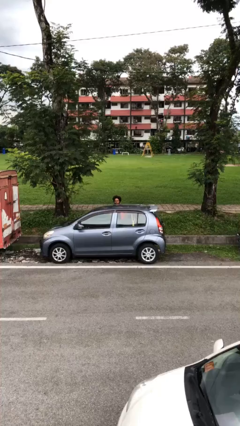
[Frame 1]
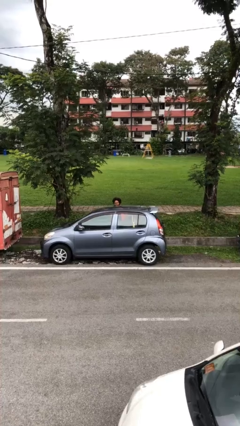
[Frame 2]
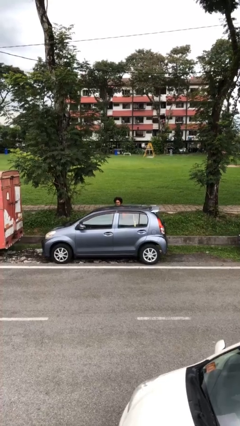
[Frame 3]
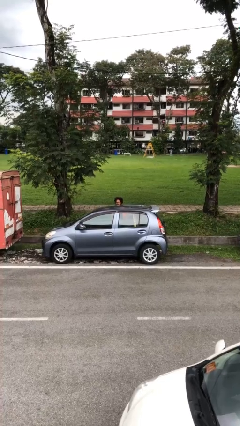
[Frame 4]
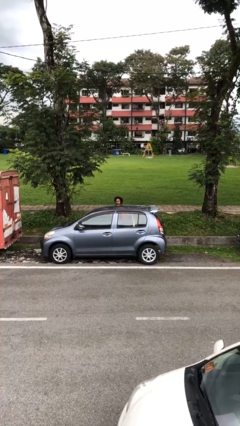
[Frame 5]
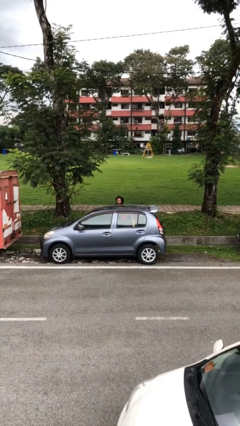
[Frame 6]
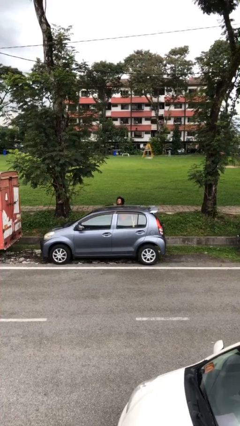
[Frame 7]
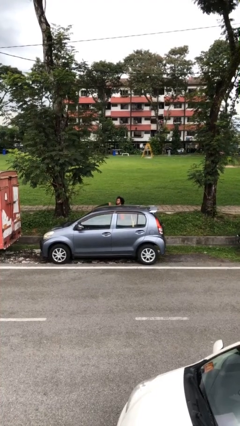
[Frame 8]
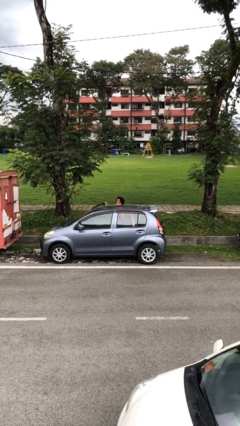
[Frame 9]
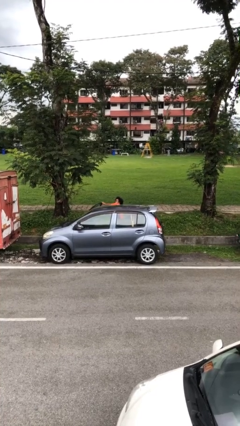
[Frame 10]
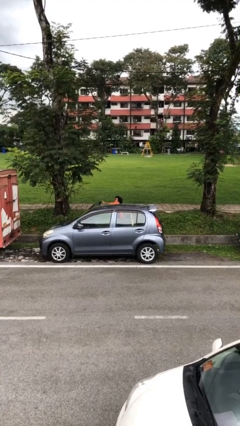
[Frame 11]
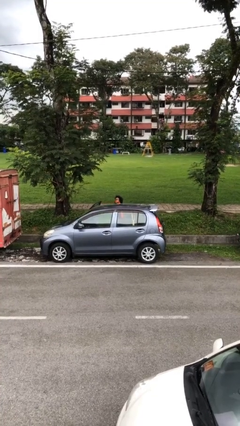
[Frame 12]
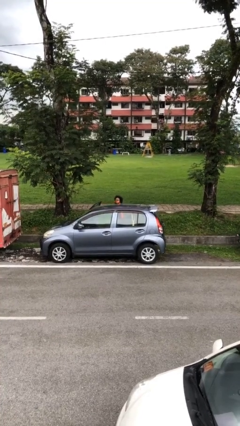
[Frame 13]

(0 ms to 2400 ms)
person opens car door

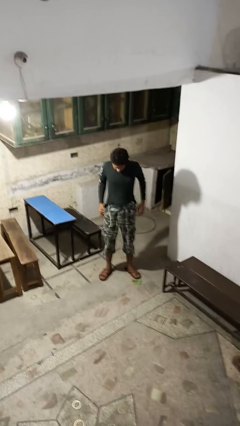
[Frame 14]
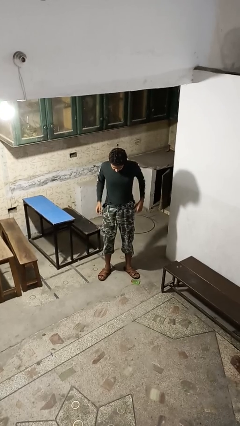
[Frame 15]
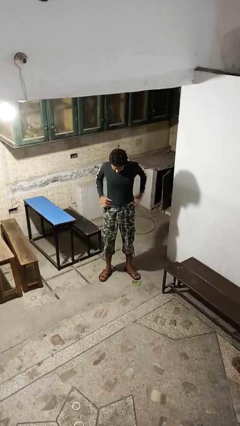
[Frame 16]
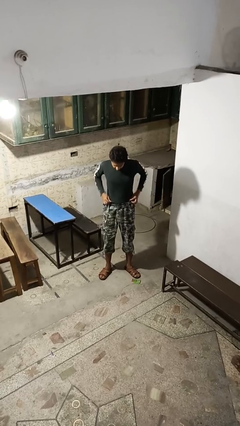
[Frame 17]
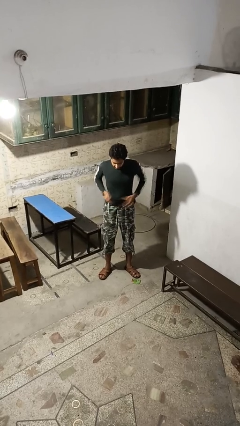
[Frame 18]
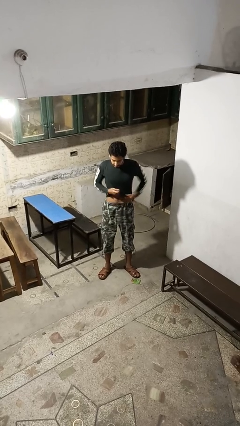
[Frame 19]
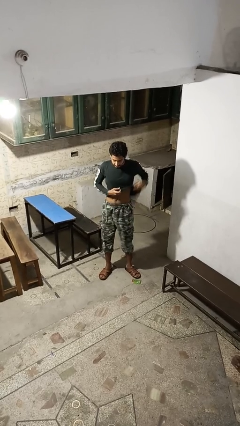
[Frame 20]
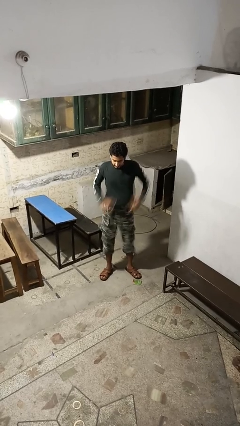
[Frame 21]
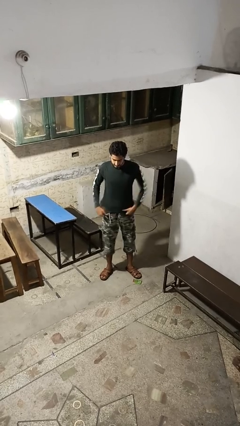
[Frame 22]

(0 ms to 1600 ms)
person untucks shirt

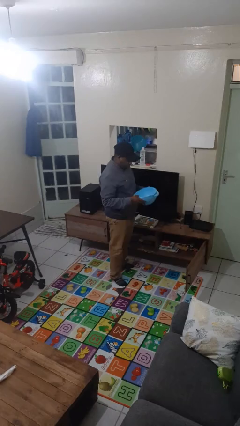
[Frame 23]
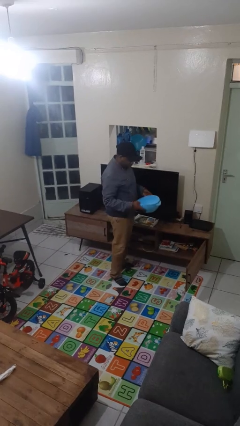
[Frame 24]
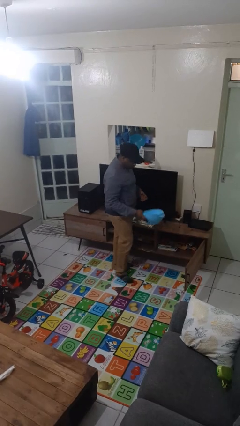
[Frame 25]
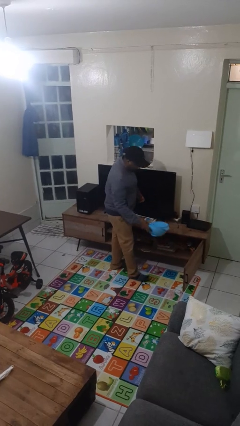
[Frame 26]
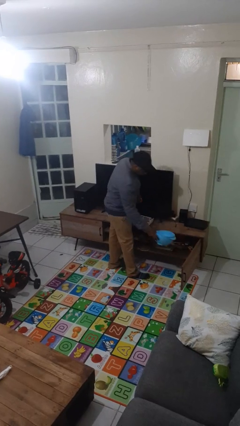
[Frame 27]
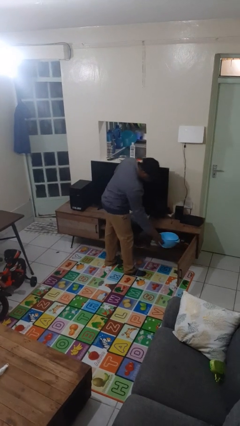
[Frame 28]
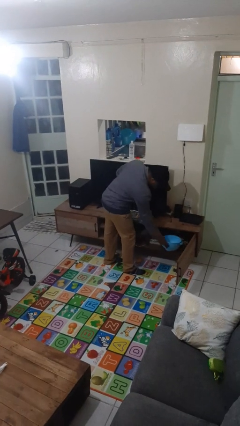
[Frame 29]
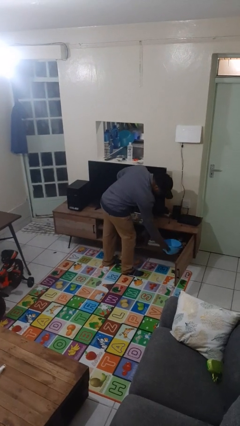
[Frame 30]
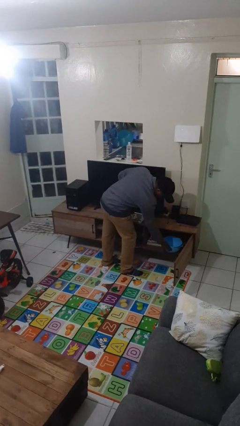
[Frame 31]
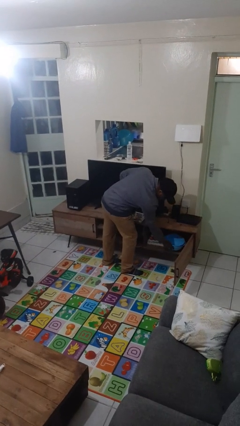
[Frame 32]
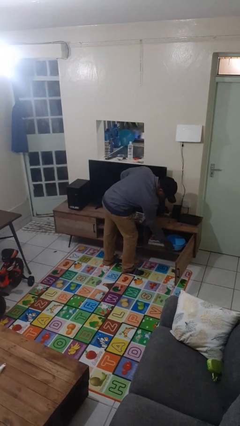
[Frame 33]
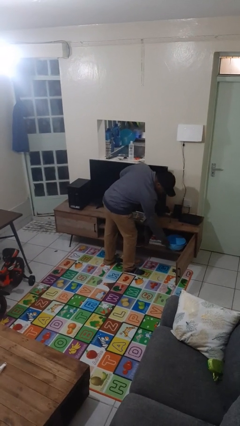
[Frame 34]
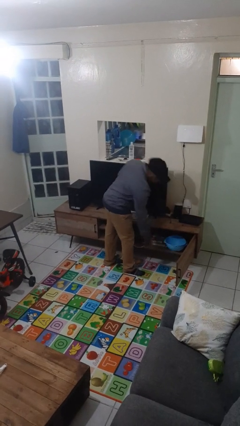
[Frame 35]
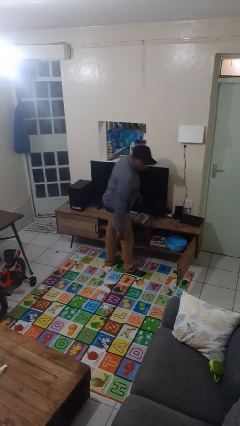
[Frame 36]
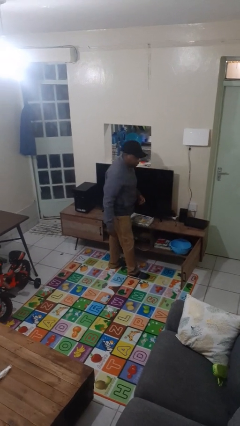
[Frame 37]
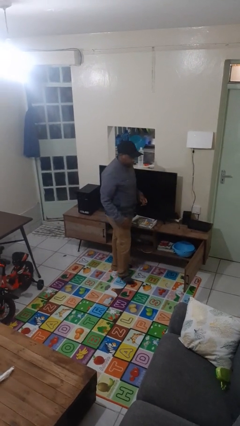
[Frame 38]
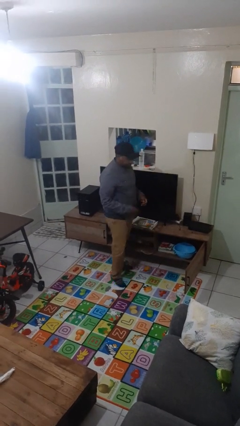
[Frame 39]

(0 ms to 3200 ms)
person puts down object into cabinet

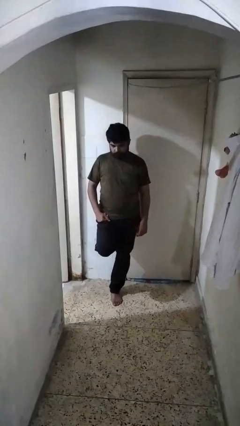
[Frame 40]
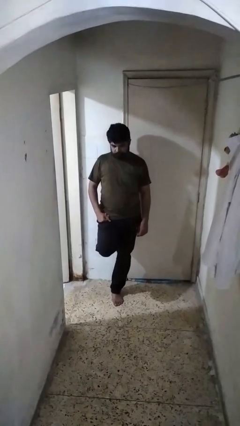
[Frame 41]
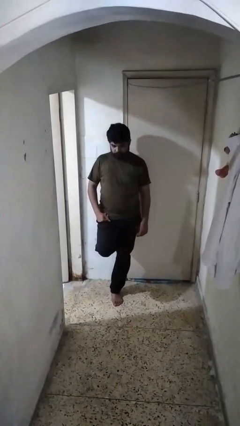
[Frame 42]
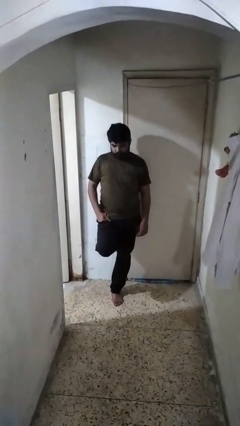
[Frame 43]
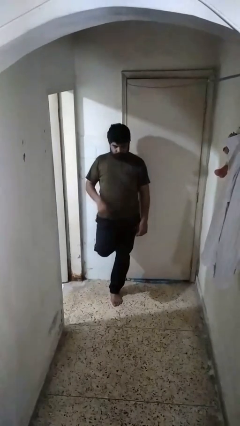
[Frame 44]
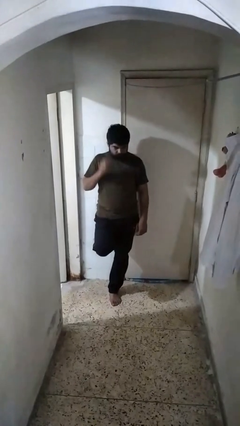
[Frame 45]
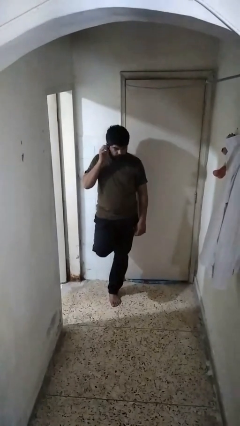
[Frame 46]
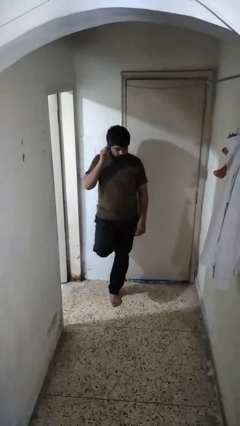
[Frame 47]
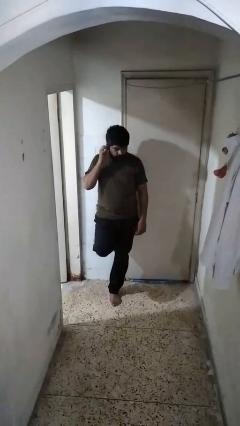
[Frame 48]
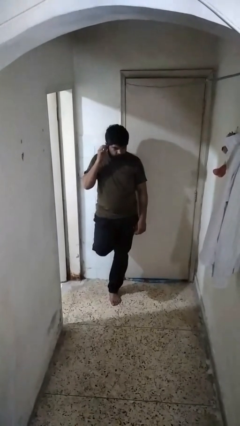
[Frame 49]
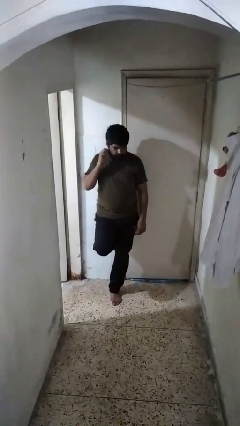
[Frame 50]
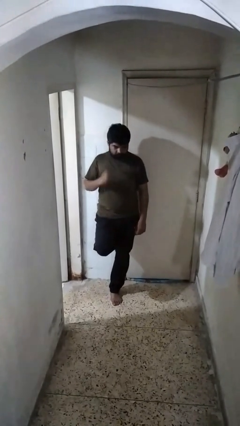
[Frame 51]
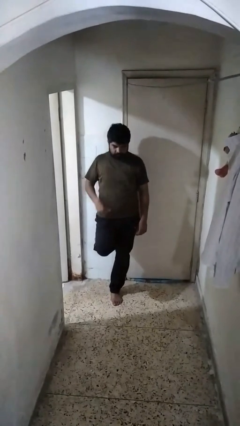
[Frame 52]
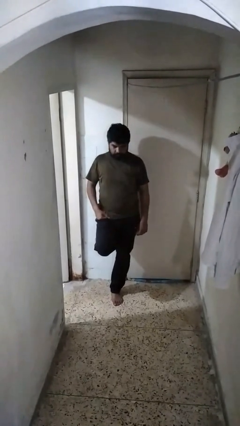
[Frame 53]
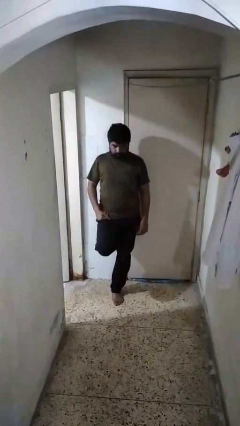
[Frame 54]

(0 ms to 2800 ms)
person touches earlobe

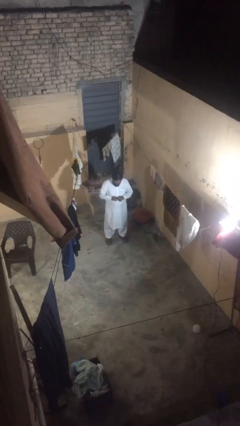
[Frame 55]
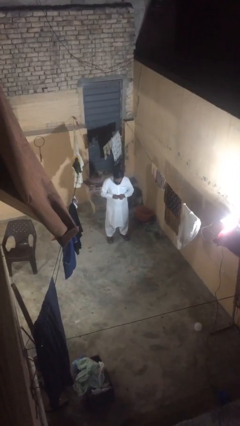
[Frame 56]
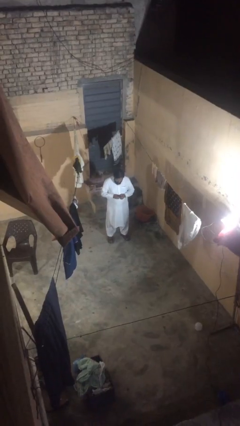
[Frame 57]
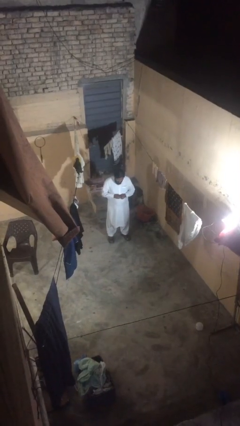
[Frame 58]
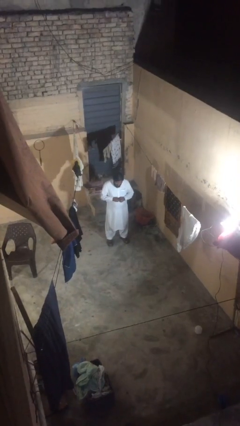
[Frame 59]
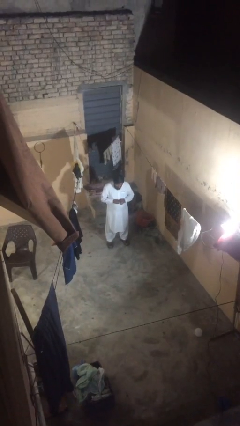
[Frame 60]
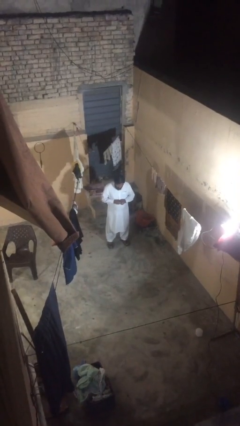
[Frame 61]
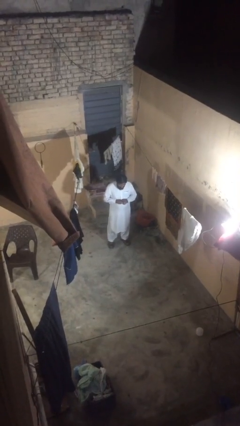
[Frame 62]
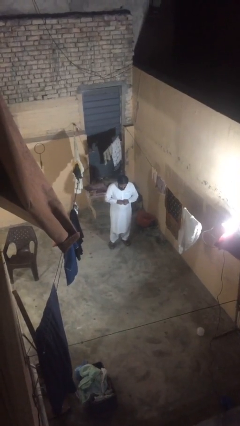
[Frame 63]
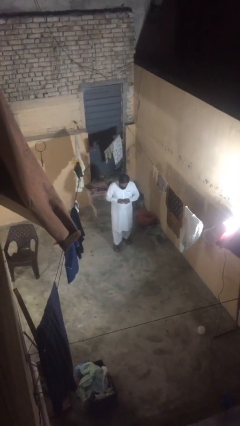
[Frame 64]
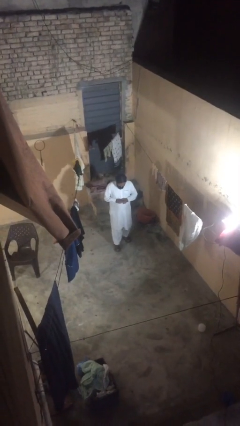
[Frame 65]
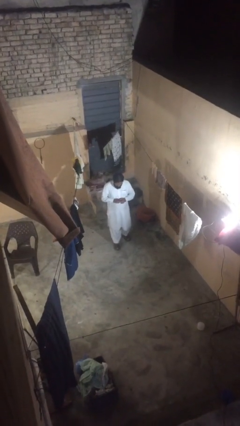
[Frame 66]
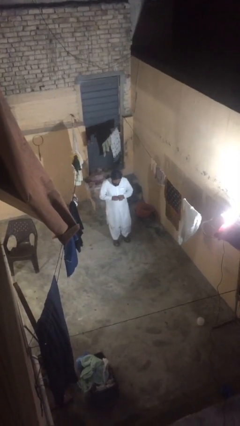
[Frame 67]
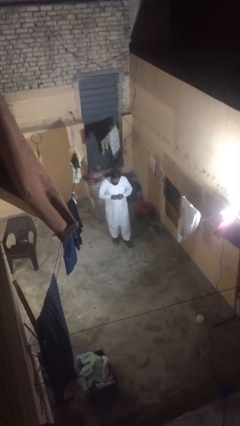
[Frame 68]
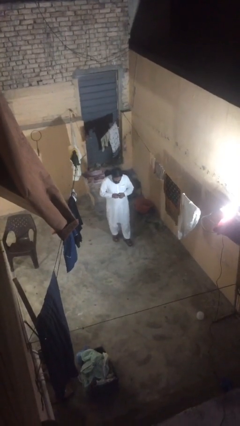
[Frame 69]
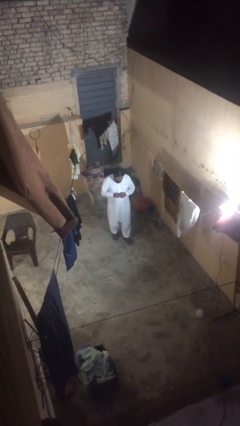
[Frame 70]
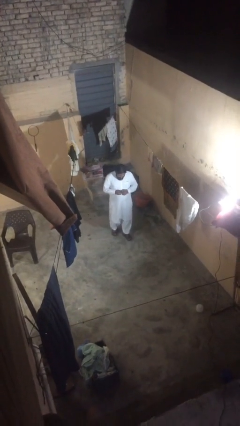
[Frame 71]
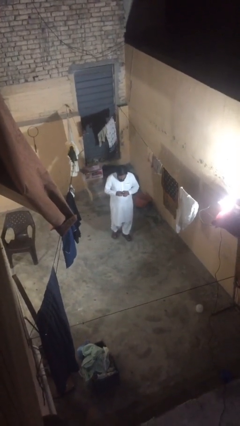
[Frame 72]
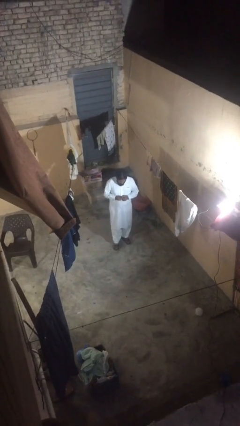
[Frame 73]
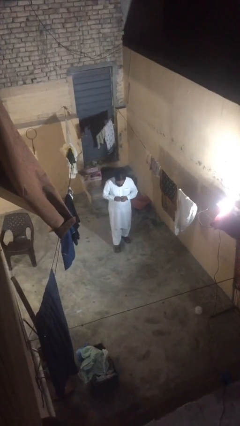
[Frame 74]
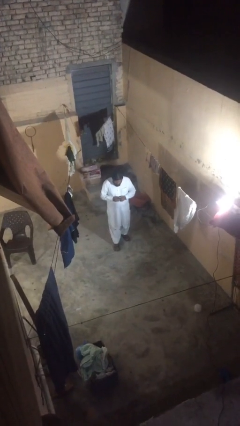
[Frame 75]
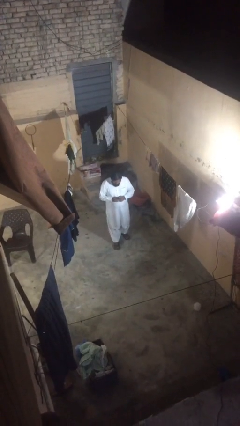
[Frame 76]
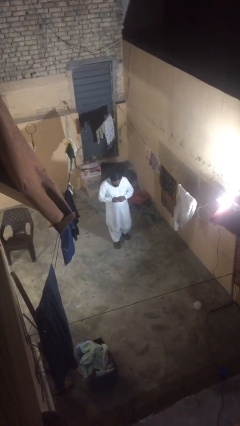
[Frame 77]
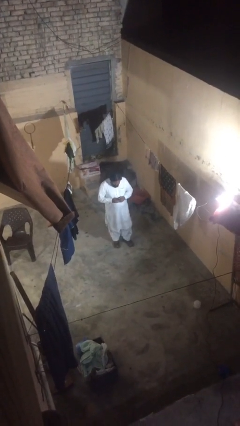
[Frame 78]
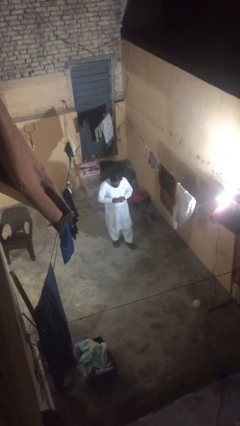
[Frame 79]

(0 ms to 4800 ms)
person texts on phone

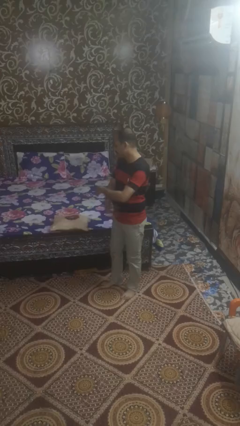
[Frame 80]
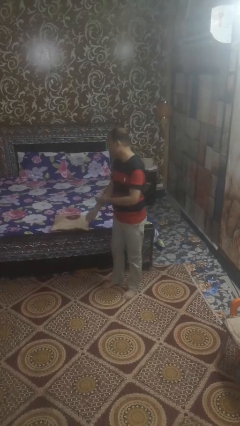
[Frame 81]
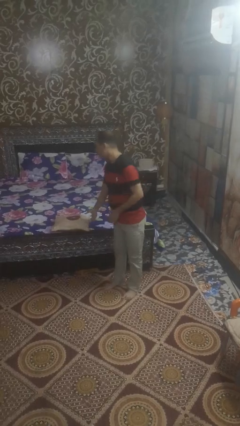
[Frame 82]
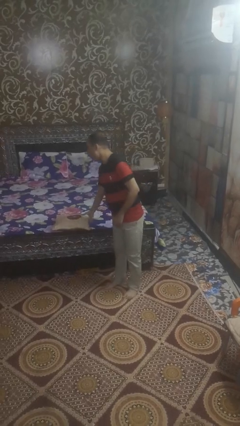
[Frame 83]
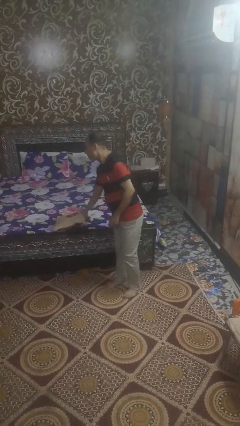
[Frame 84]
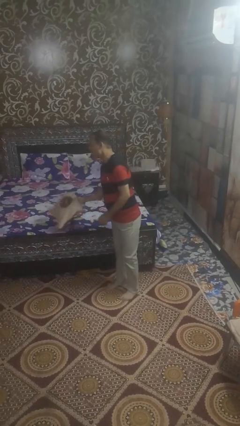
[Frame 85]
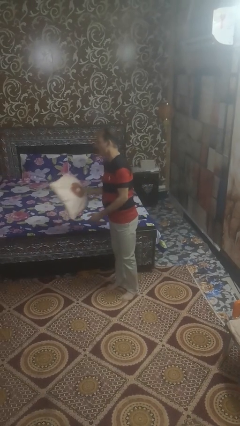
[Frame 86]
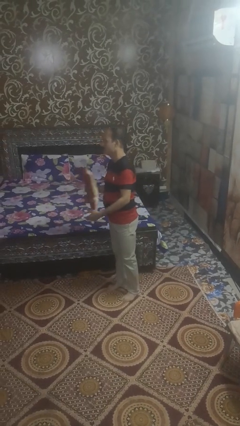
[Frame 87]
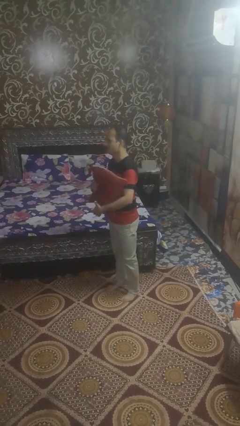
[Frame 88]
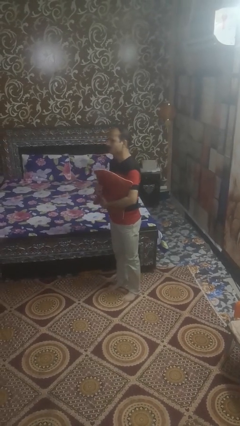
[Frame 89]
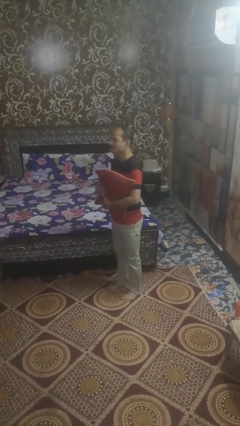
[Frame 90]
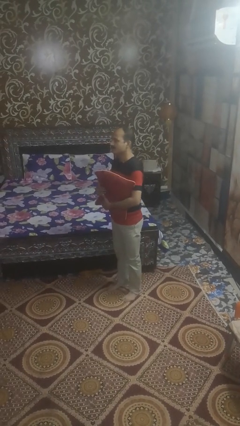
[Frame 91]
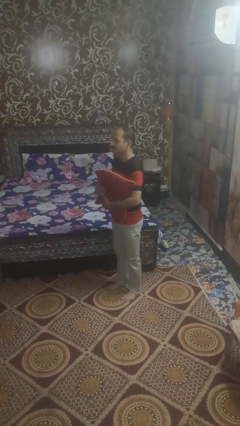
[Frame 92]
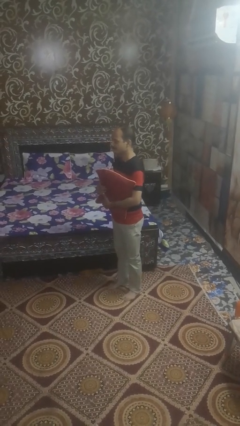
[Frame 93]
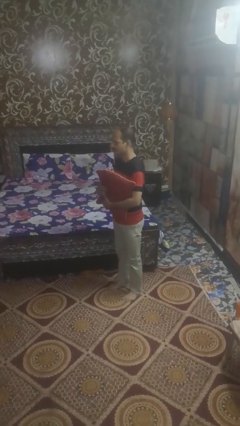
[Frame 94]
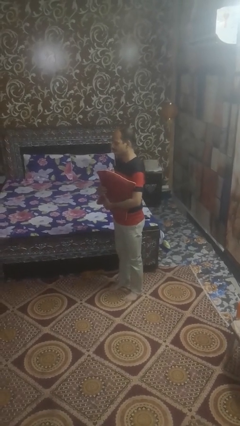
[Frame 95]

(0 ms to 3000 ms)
person picks up object from bed
